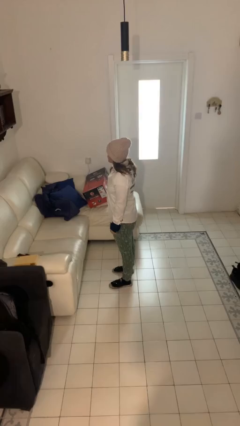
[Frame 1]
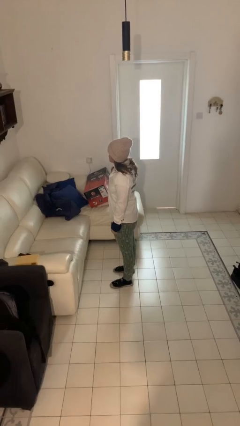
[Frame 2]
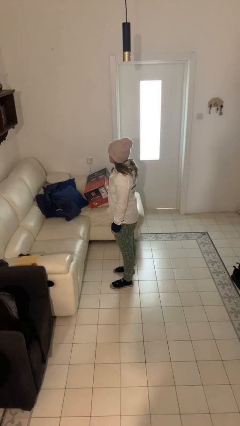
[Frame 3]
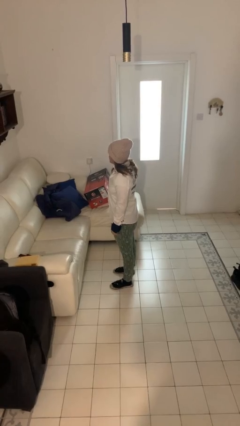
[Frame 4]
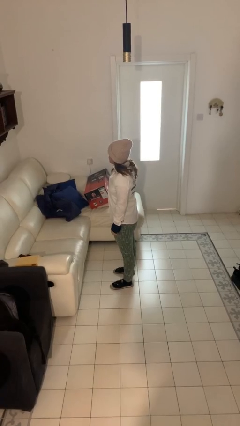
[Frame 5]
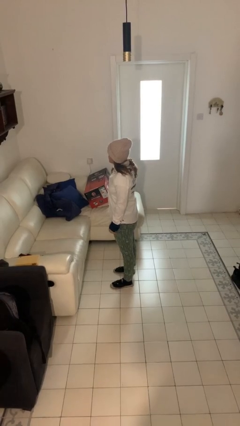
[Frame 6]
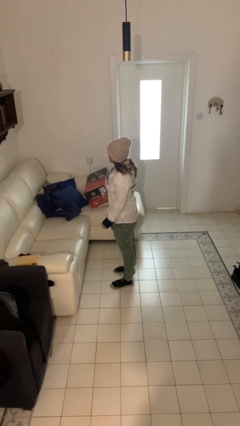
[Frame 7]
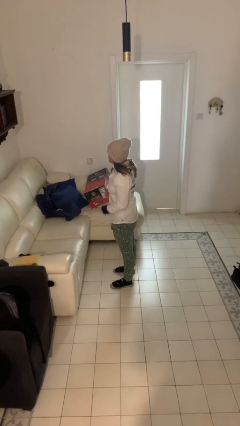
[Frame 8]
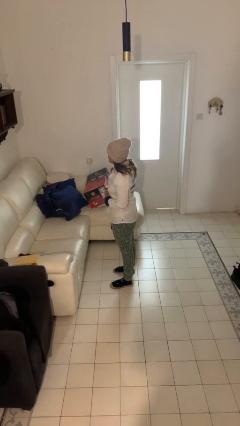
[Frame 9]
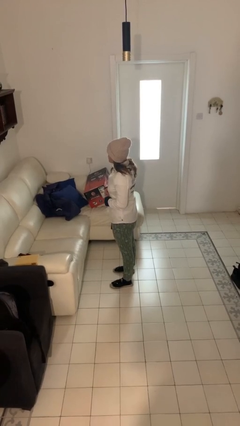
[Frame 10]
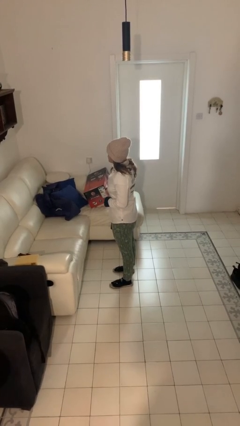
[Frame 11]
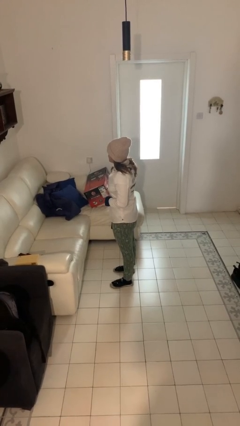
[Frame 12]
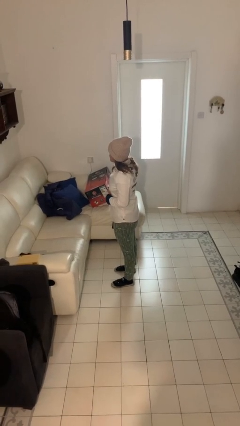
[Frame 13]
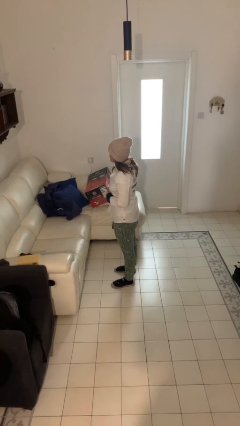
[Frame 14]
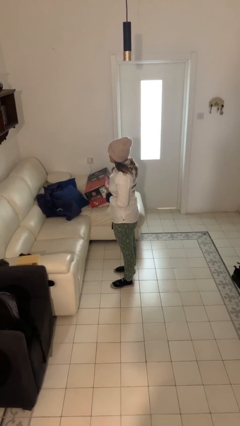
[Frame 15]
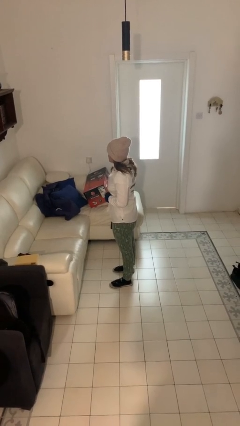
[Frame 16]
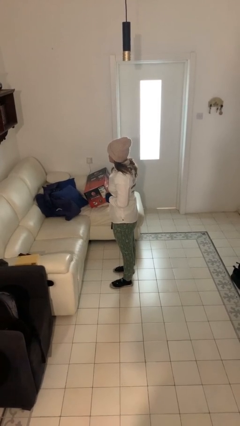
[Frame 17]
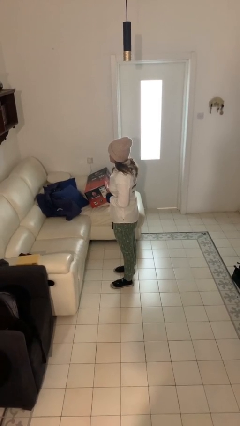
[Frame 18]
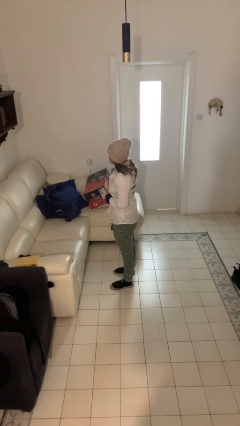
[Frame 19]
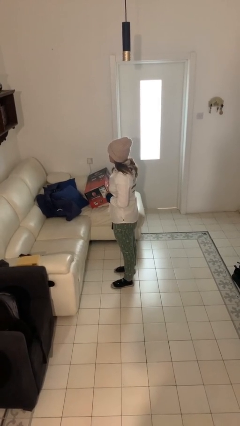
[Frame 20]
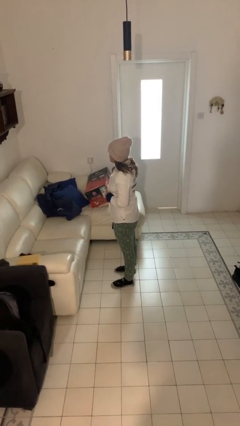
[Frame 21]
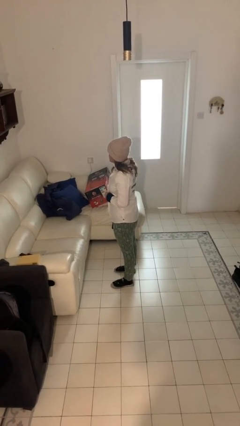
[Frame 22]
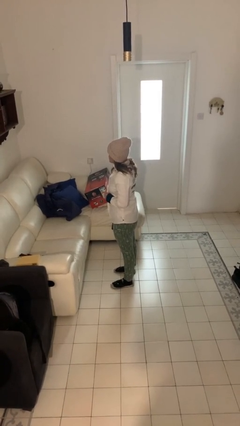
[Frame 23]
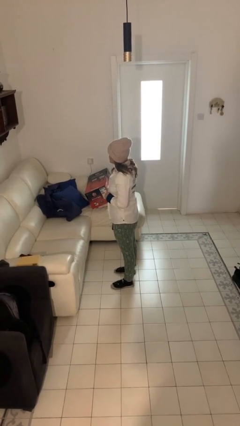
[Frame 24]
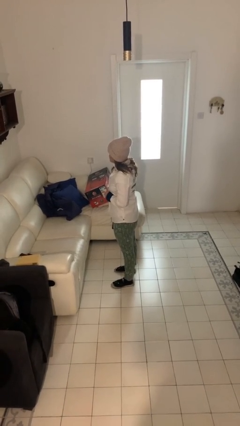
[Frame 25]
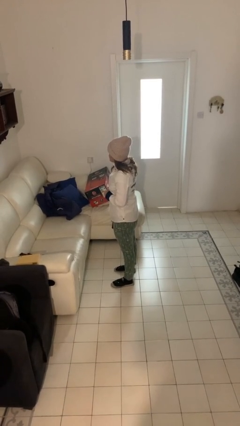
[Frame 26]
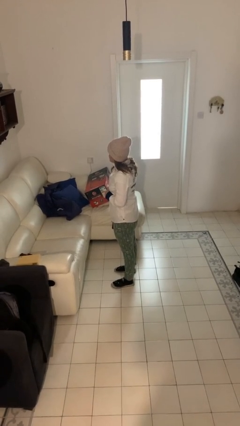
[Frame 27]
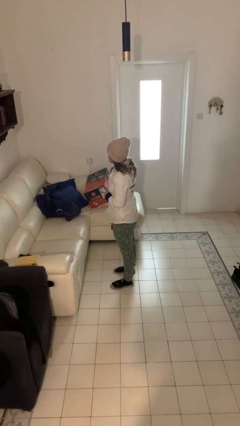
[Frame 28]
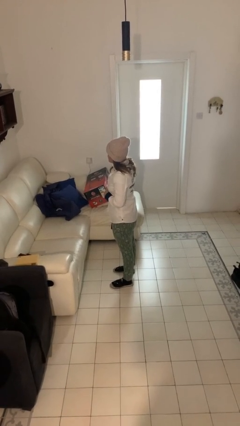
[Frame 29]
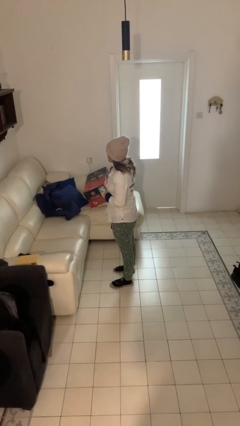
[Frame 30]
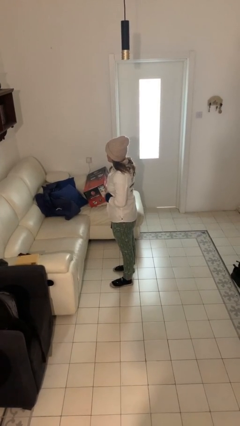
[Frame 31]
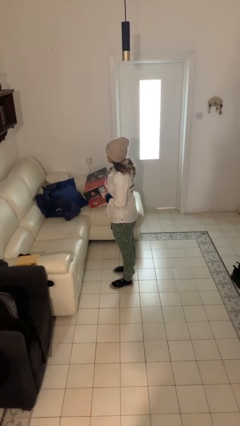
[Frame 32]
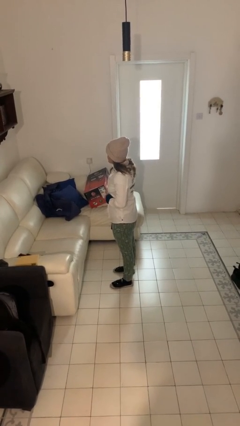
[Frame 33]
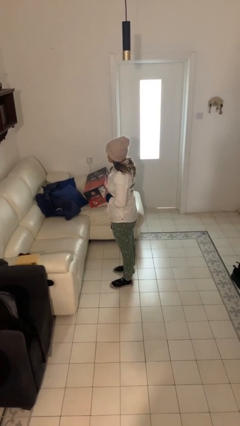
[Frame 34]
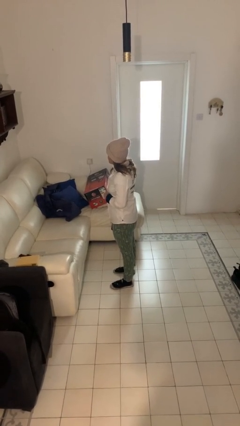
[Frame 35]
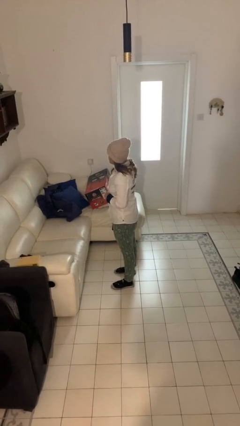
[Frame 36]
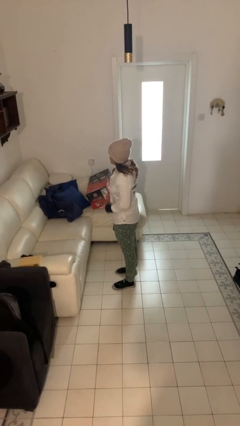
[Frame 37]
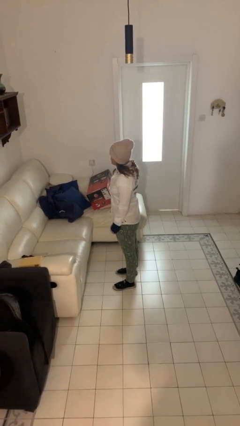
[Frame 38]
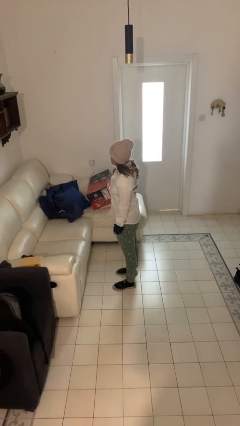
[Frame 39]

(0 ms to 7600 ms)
person buttons shirt

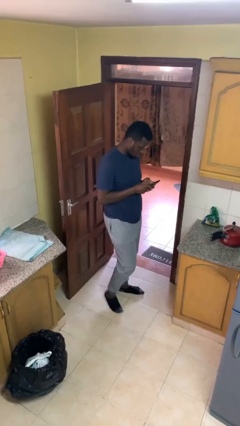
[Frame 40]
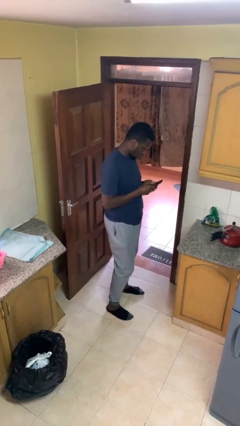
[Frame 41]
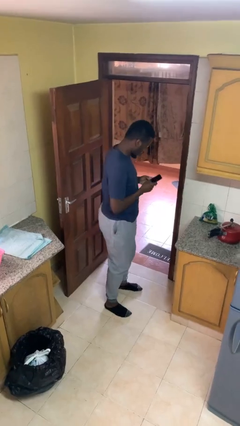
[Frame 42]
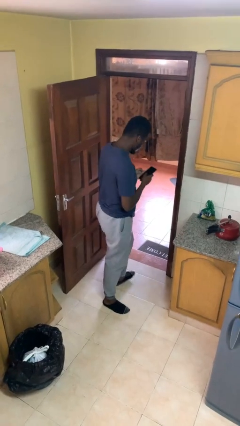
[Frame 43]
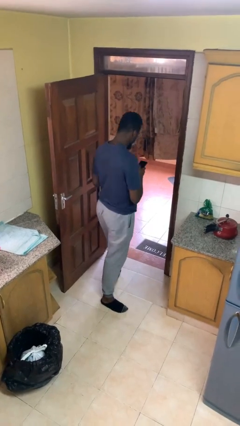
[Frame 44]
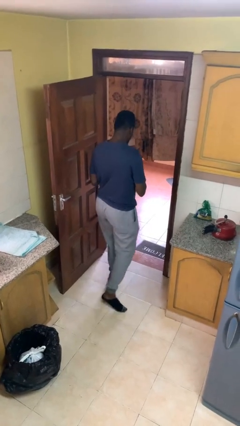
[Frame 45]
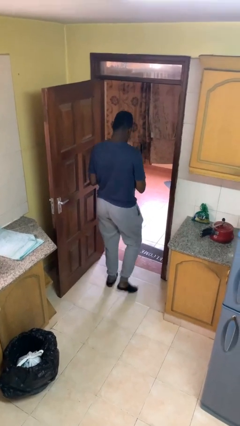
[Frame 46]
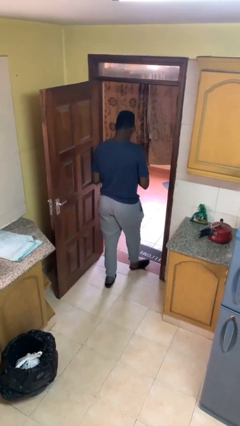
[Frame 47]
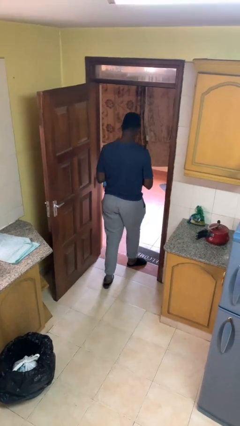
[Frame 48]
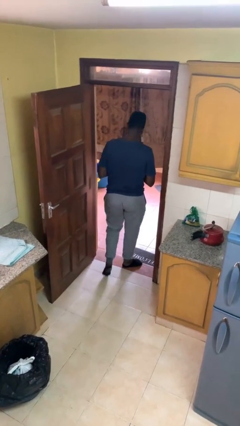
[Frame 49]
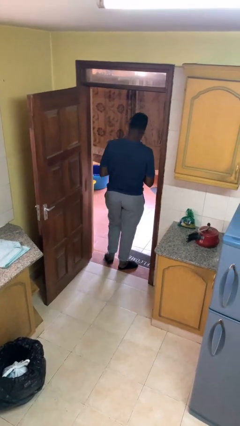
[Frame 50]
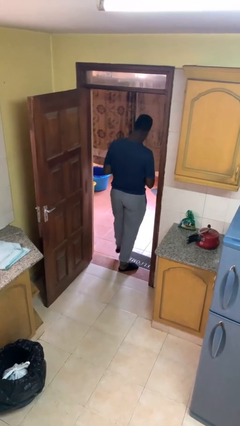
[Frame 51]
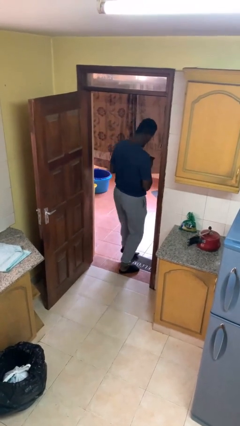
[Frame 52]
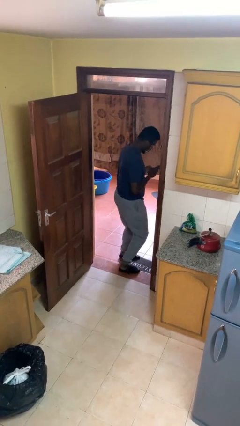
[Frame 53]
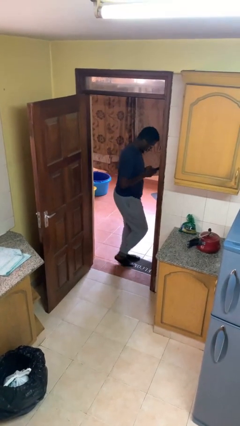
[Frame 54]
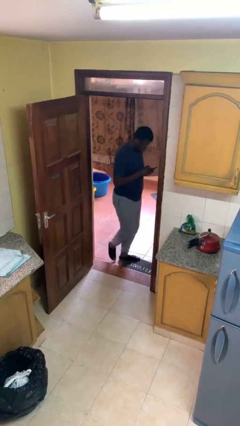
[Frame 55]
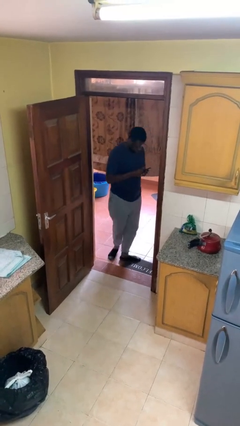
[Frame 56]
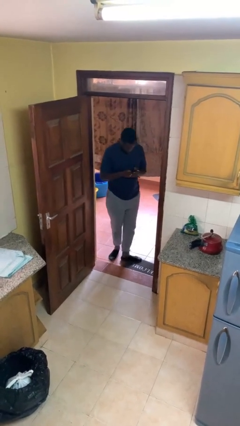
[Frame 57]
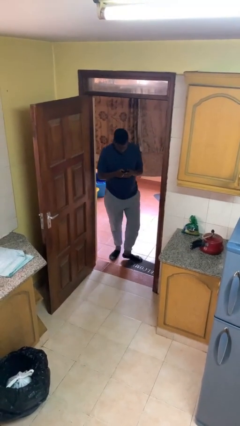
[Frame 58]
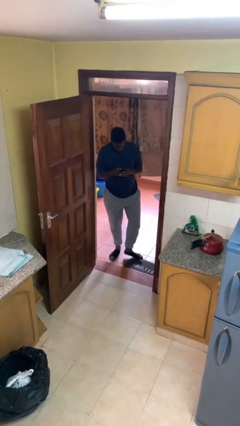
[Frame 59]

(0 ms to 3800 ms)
person exits scene through structure

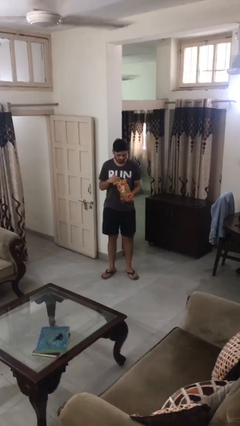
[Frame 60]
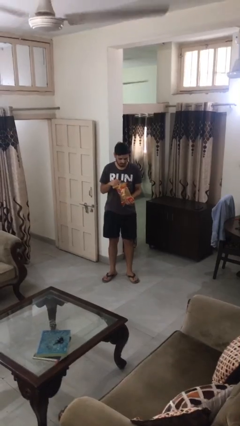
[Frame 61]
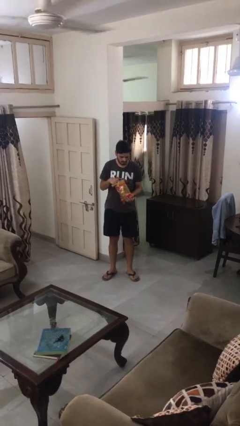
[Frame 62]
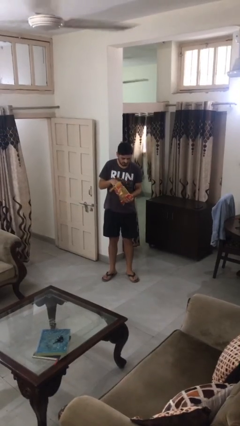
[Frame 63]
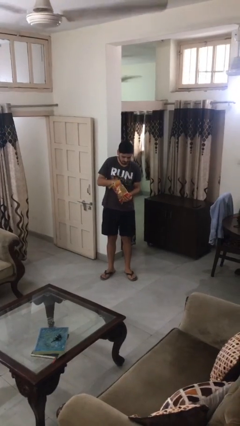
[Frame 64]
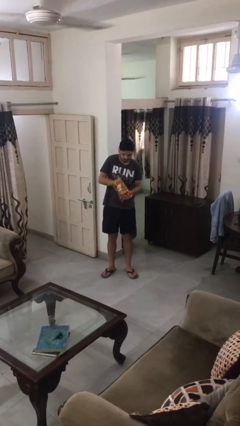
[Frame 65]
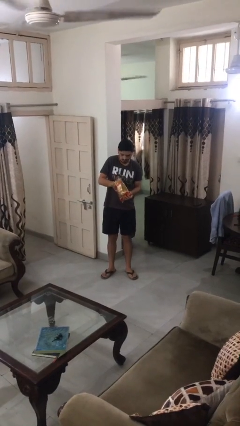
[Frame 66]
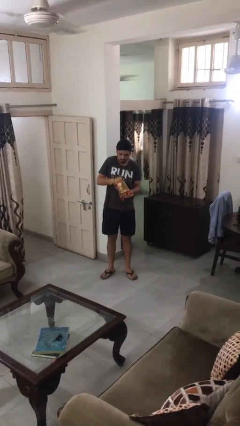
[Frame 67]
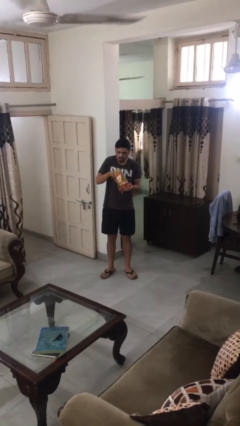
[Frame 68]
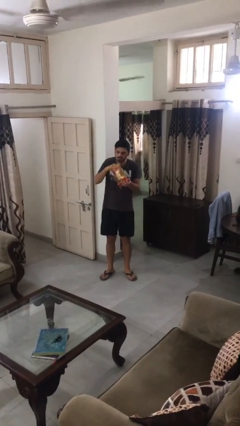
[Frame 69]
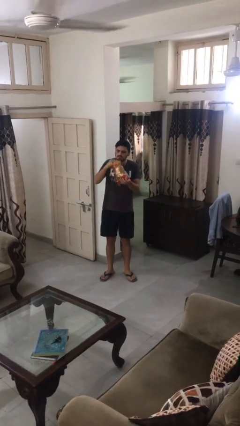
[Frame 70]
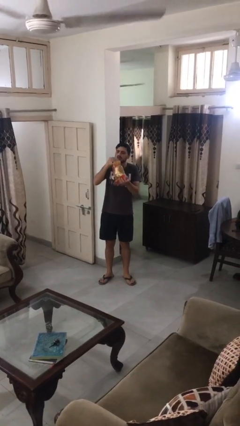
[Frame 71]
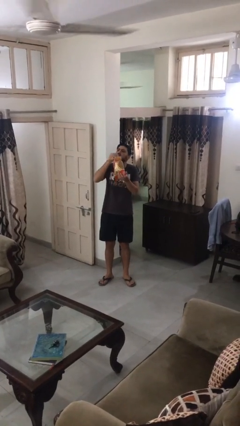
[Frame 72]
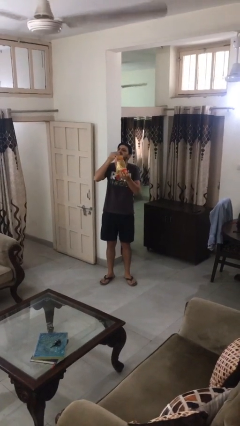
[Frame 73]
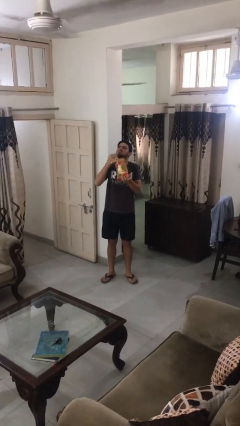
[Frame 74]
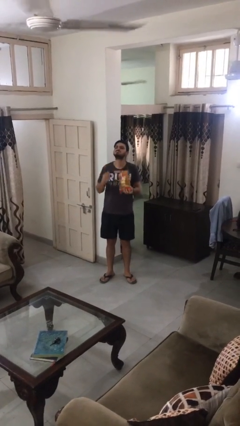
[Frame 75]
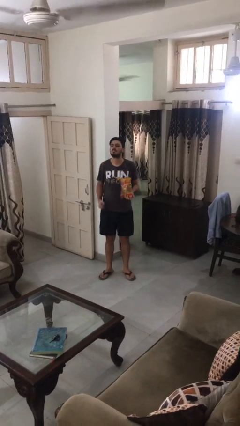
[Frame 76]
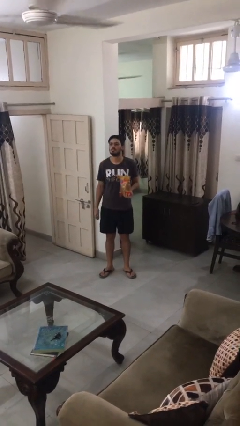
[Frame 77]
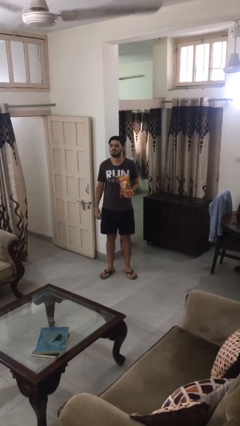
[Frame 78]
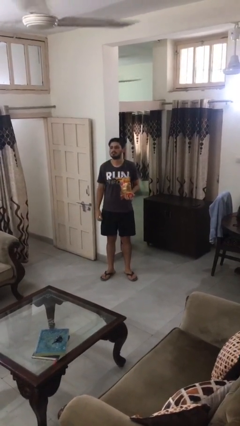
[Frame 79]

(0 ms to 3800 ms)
person eats snack from bag

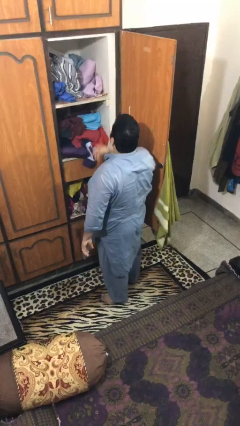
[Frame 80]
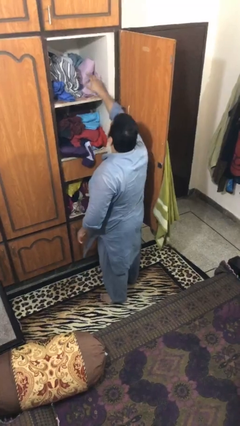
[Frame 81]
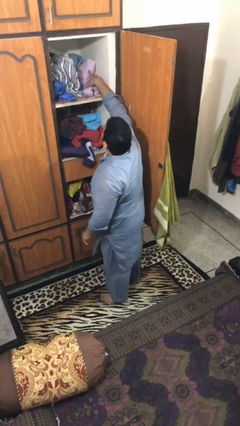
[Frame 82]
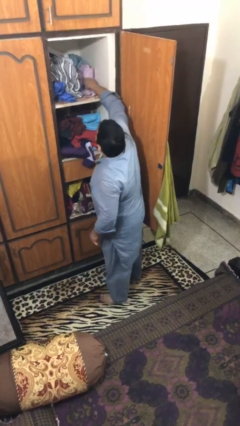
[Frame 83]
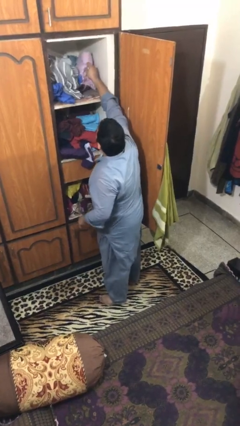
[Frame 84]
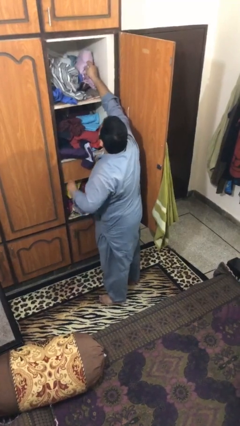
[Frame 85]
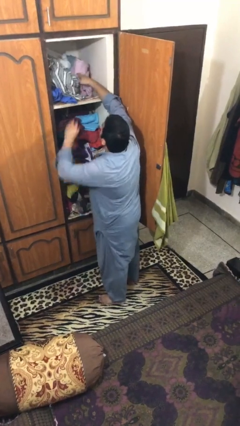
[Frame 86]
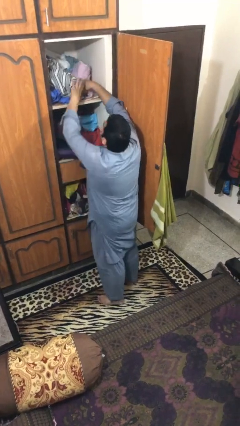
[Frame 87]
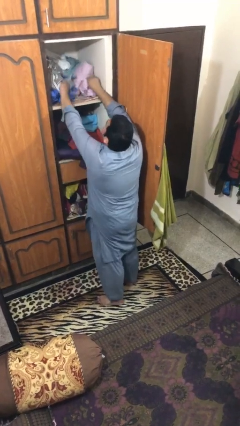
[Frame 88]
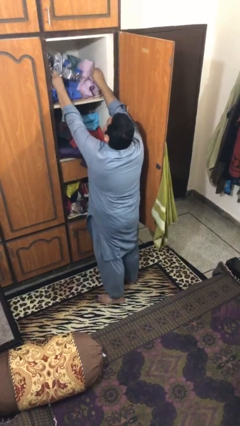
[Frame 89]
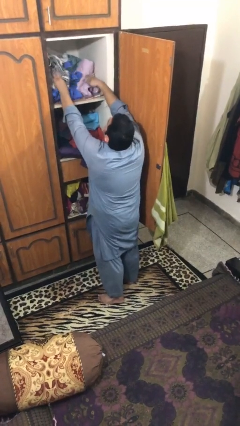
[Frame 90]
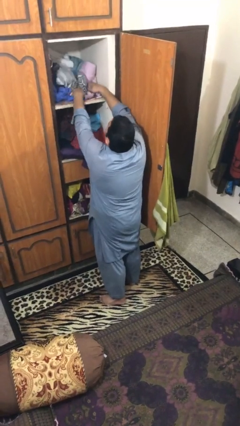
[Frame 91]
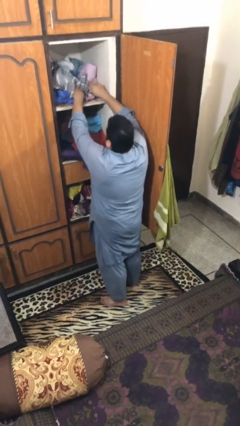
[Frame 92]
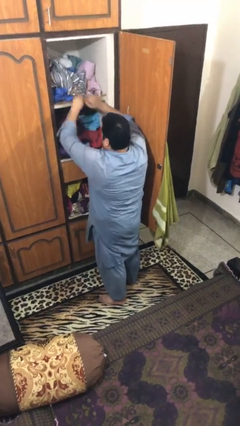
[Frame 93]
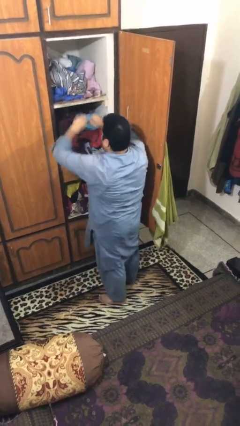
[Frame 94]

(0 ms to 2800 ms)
person searches in cabinet
